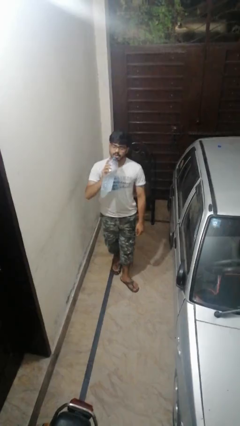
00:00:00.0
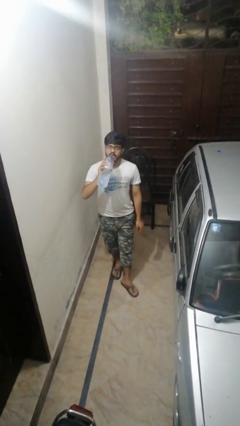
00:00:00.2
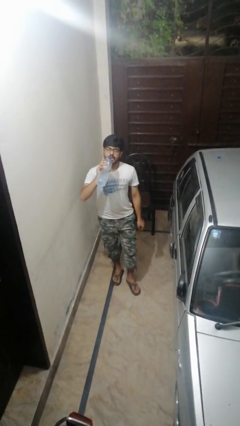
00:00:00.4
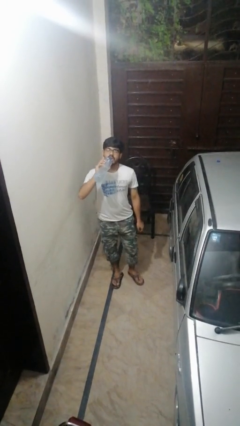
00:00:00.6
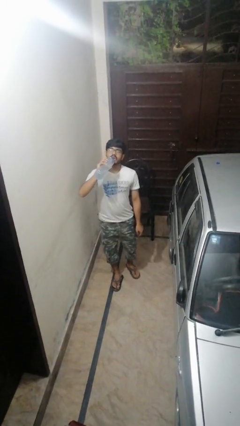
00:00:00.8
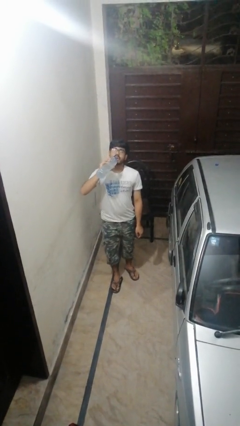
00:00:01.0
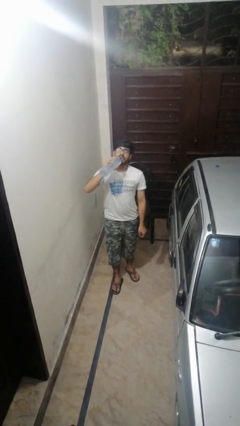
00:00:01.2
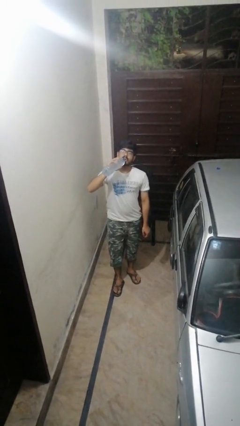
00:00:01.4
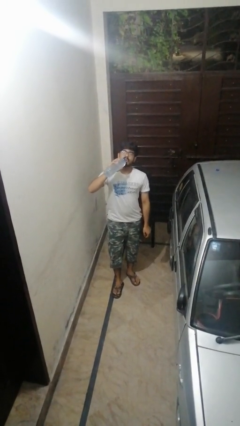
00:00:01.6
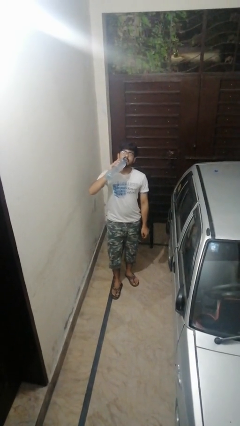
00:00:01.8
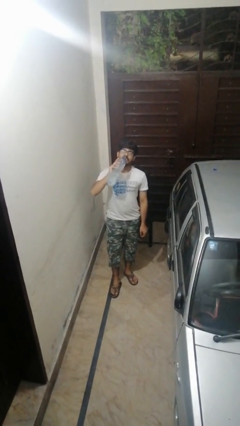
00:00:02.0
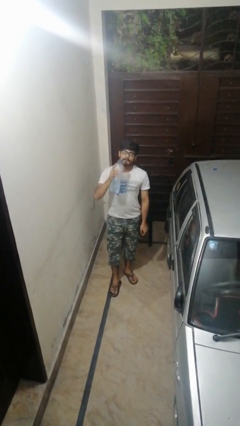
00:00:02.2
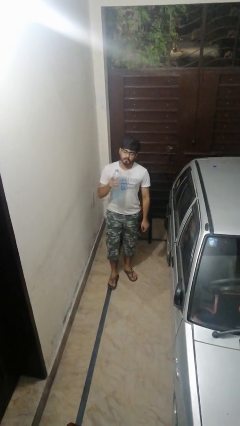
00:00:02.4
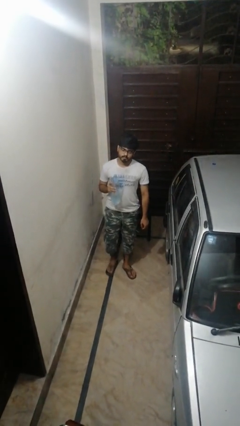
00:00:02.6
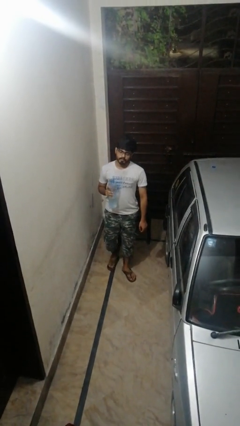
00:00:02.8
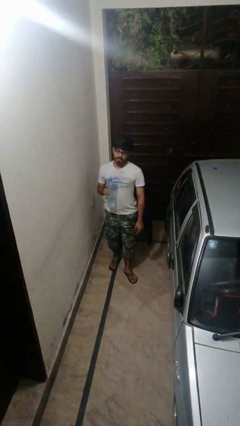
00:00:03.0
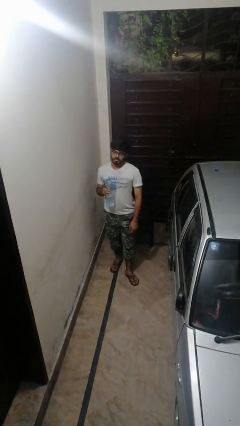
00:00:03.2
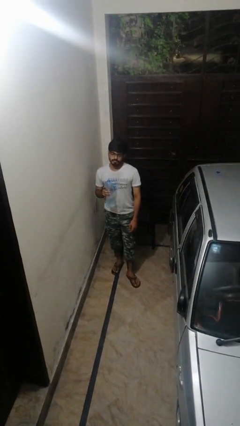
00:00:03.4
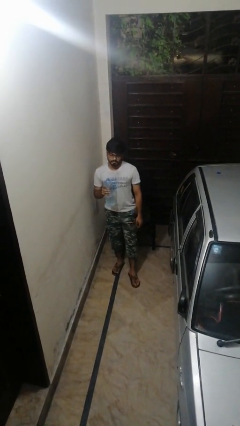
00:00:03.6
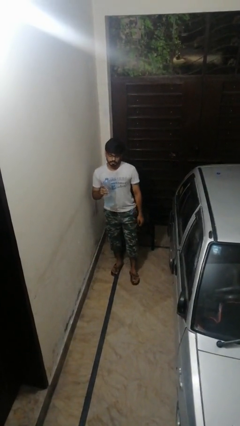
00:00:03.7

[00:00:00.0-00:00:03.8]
person drinks from bottle

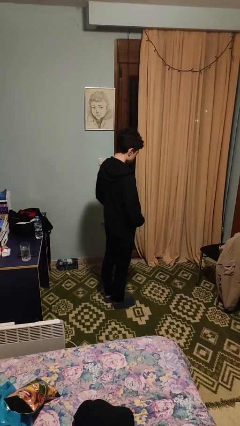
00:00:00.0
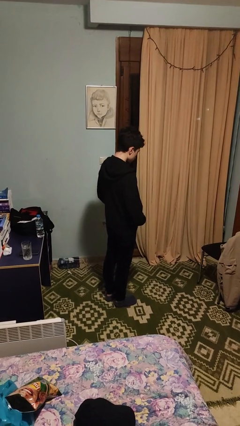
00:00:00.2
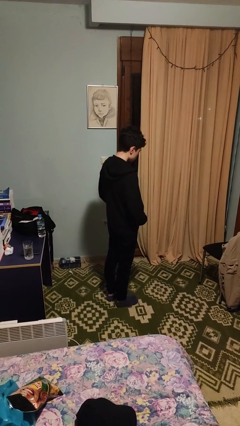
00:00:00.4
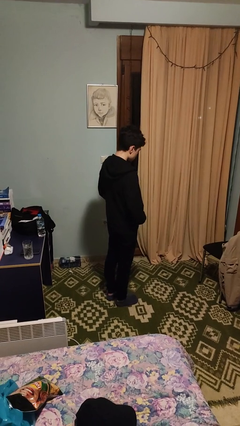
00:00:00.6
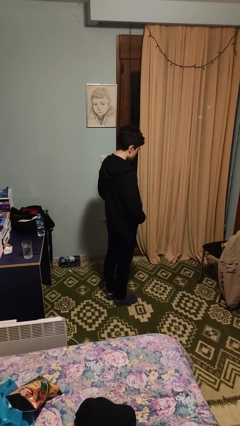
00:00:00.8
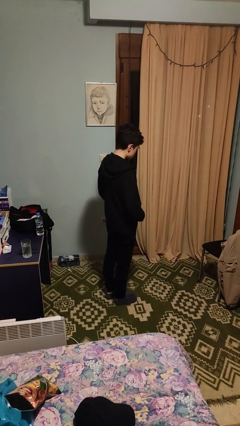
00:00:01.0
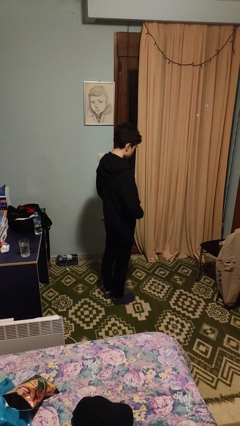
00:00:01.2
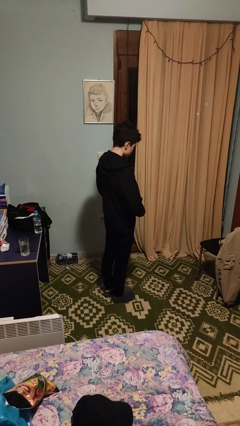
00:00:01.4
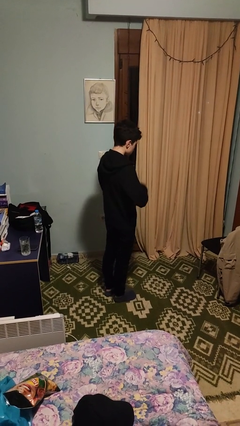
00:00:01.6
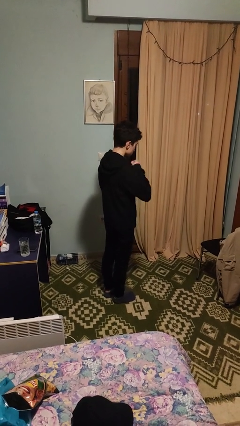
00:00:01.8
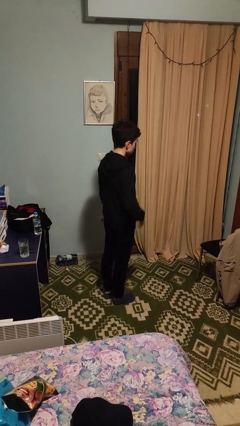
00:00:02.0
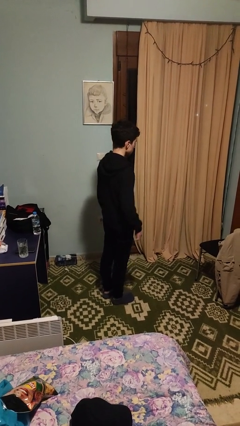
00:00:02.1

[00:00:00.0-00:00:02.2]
person zips up jacket

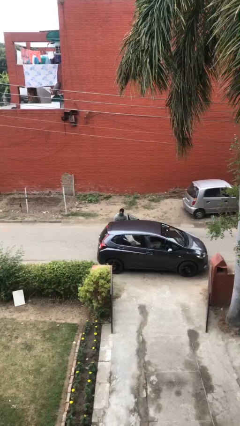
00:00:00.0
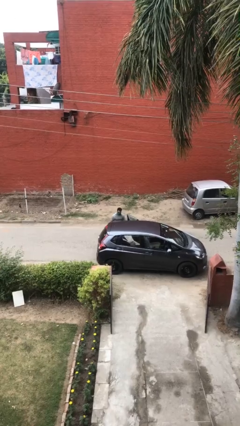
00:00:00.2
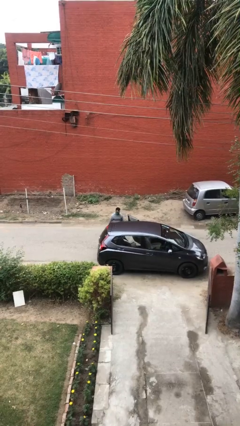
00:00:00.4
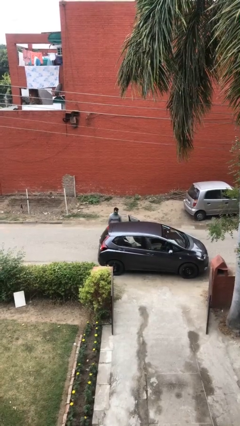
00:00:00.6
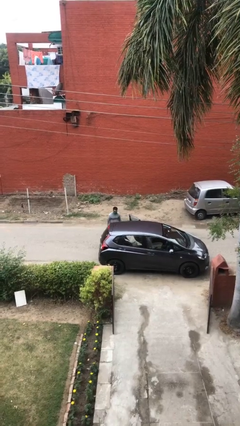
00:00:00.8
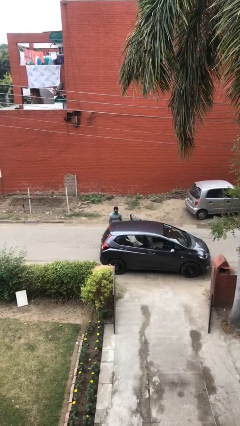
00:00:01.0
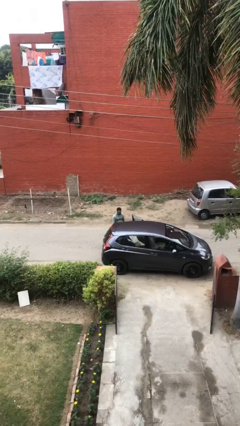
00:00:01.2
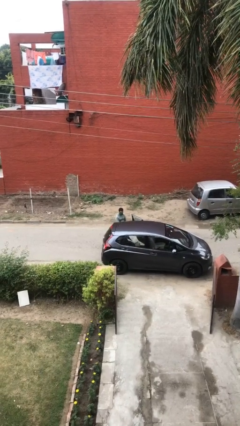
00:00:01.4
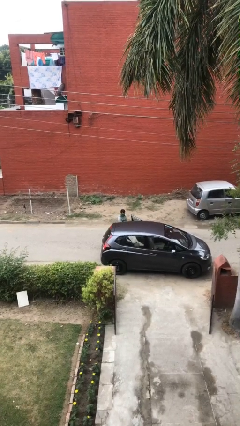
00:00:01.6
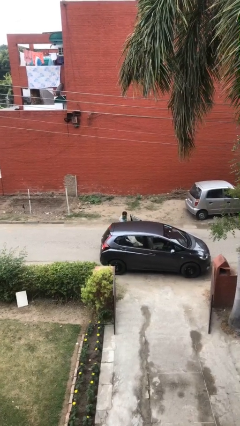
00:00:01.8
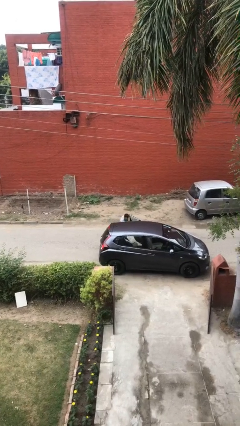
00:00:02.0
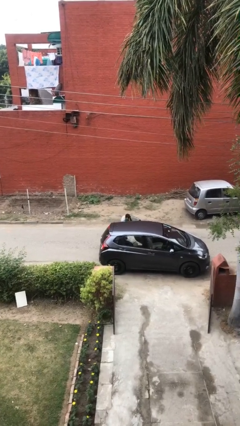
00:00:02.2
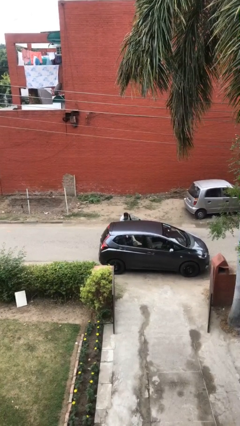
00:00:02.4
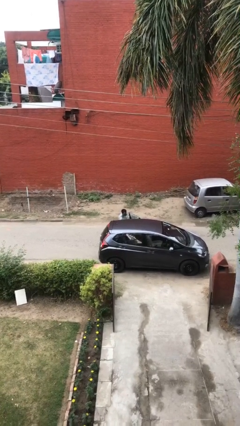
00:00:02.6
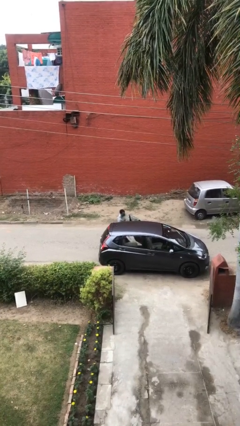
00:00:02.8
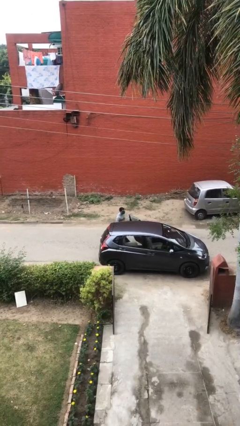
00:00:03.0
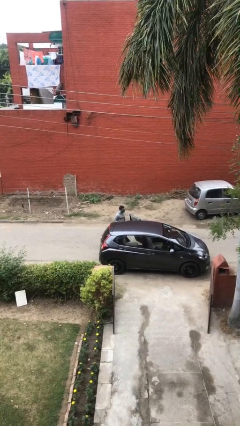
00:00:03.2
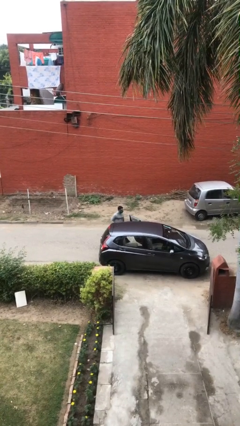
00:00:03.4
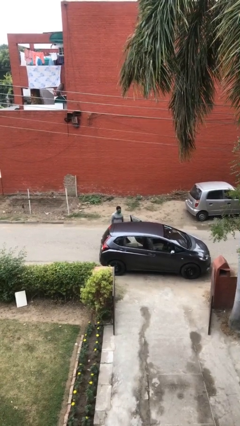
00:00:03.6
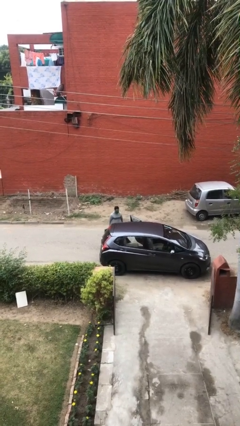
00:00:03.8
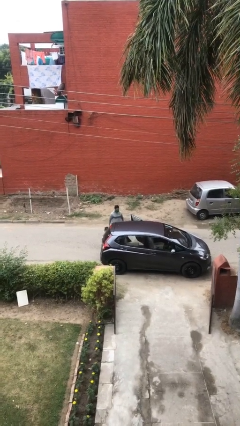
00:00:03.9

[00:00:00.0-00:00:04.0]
person unloads car

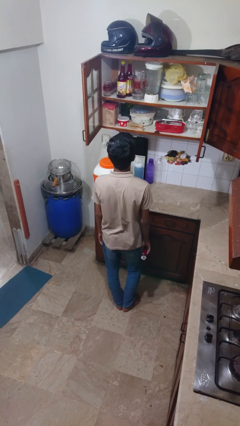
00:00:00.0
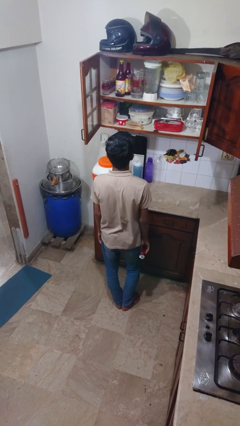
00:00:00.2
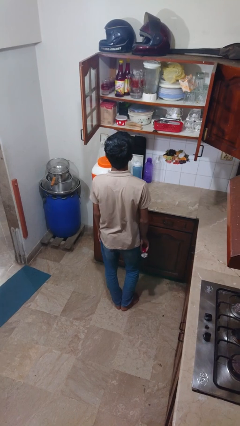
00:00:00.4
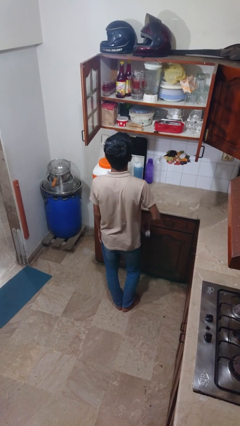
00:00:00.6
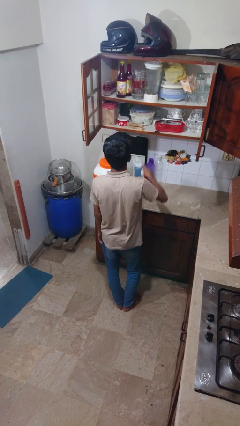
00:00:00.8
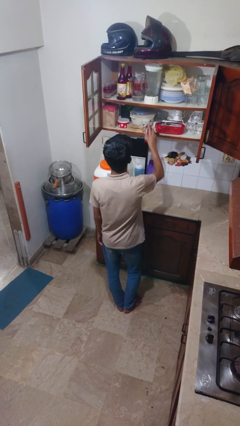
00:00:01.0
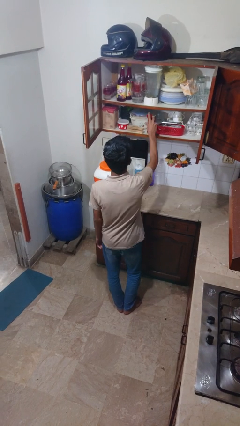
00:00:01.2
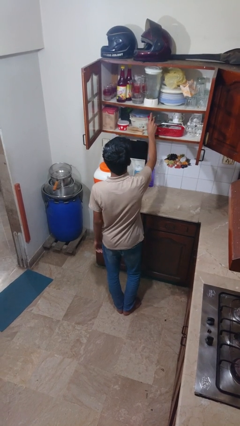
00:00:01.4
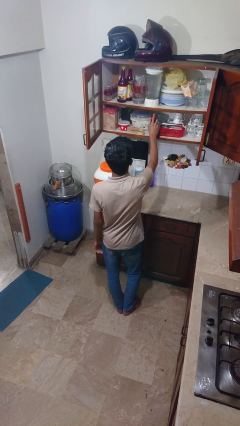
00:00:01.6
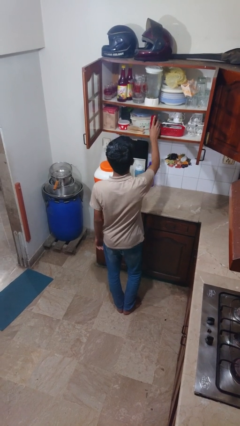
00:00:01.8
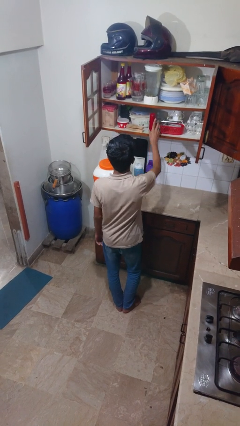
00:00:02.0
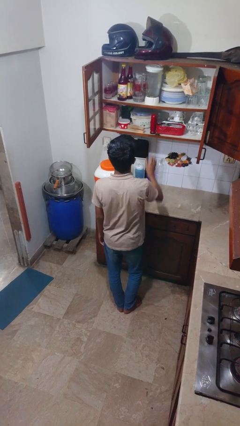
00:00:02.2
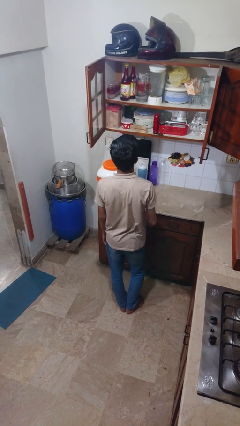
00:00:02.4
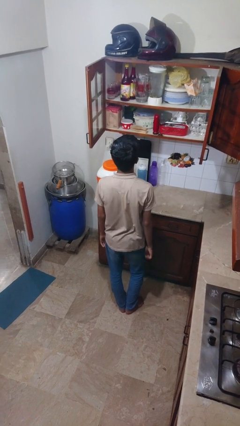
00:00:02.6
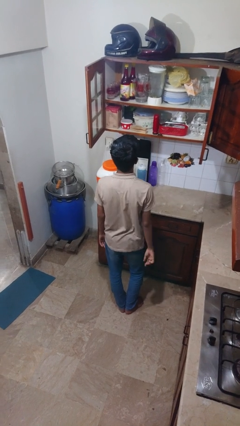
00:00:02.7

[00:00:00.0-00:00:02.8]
person puts down object into cabinet

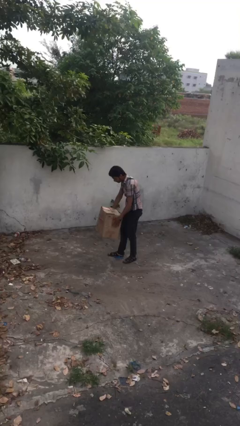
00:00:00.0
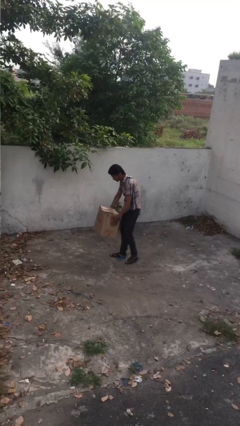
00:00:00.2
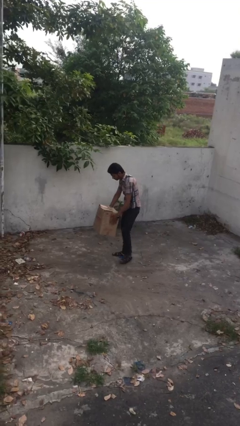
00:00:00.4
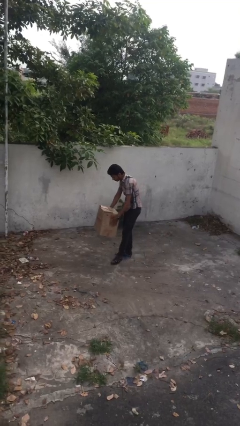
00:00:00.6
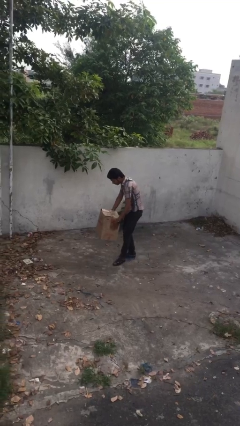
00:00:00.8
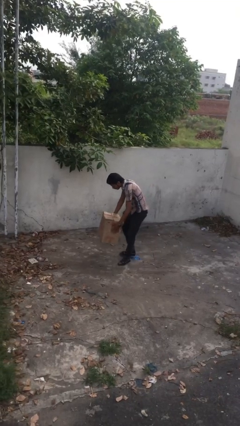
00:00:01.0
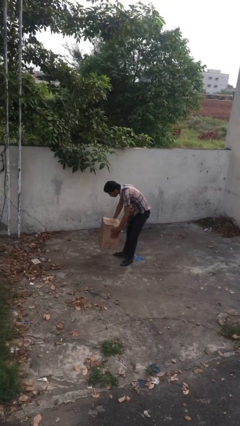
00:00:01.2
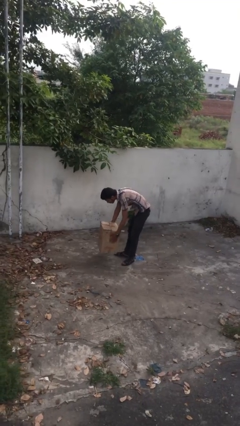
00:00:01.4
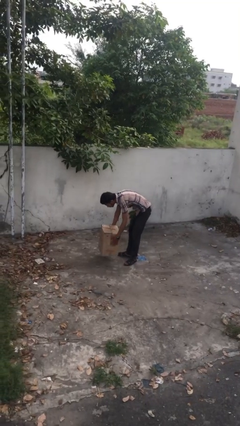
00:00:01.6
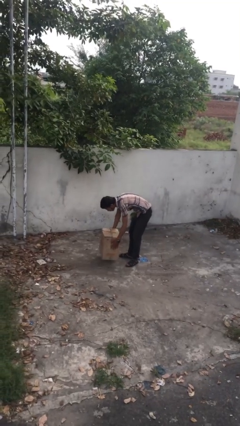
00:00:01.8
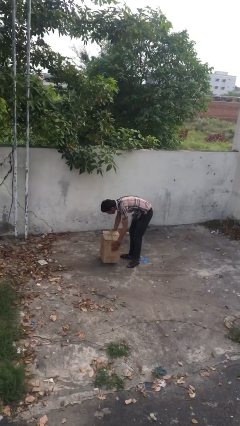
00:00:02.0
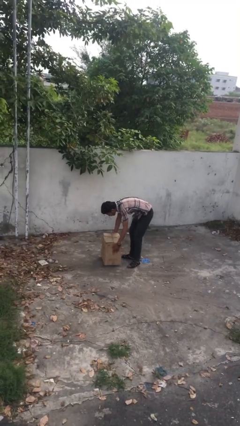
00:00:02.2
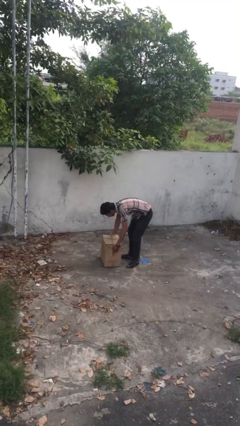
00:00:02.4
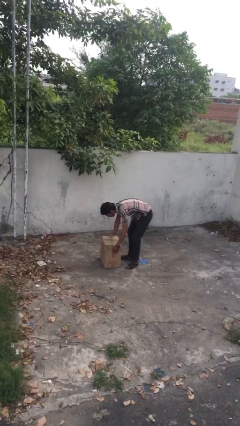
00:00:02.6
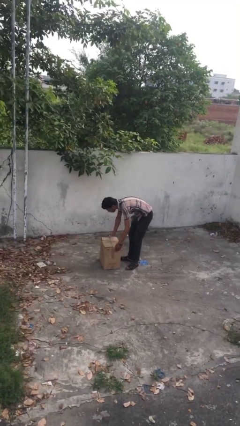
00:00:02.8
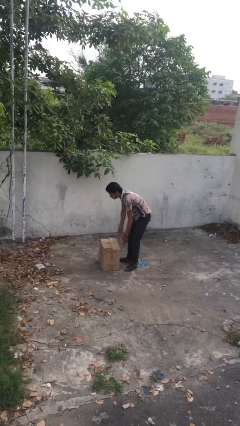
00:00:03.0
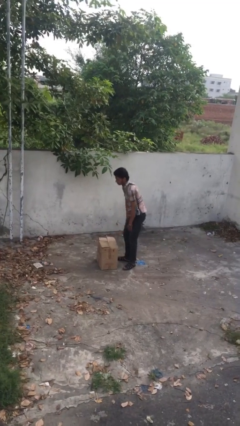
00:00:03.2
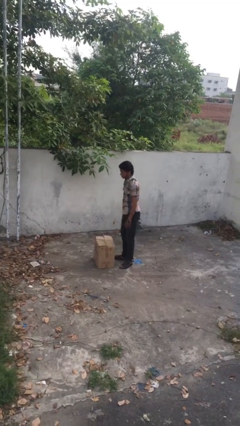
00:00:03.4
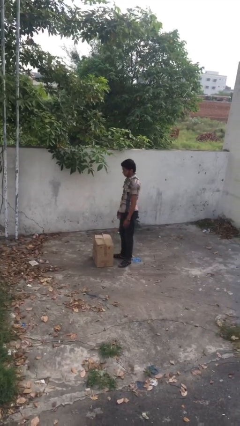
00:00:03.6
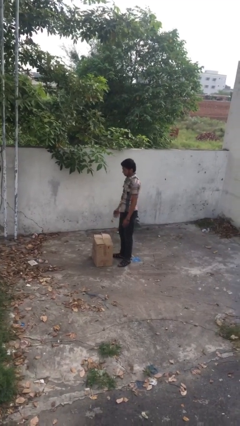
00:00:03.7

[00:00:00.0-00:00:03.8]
person puts down object on floor

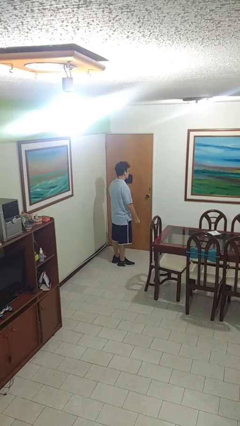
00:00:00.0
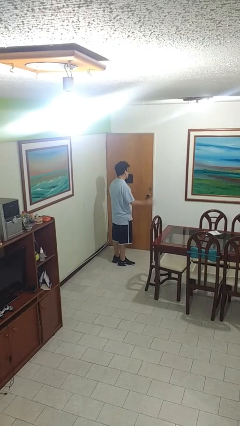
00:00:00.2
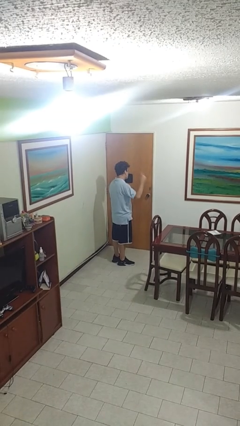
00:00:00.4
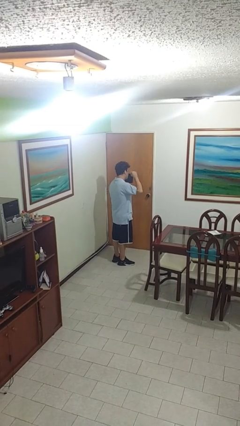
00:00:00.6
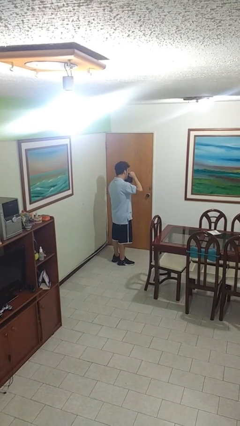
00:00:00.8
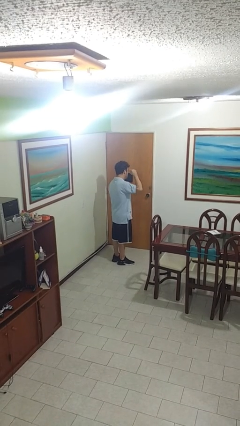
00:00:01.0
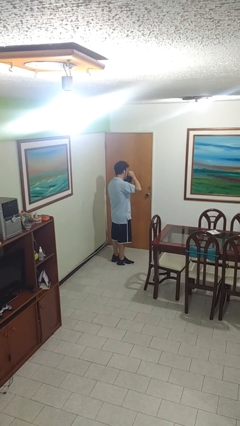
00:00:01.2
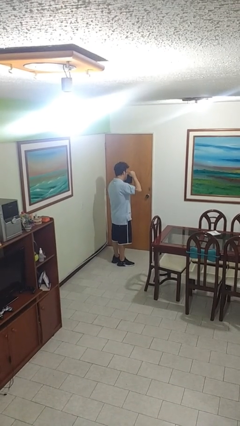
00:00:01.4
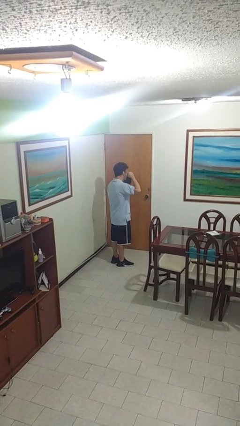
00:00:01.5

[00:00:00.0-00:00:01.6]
person gestures listen closely
